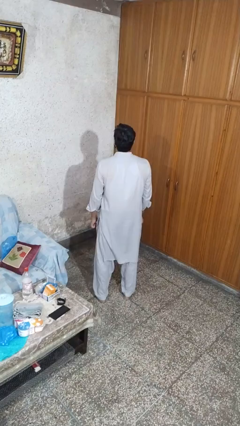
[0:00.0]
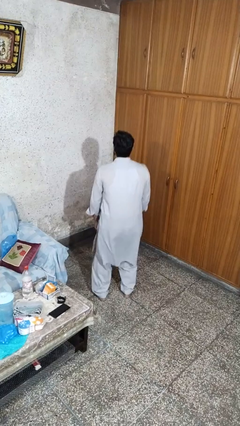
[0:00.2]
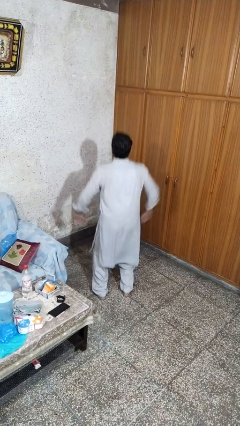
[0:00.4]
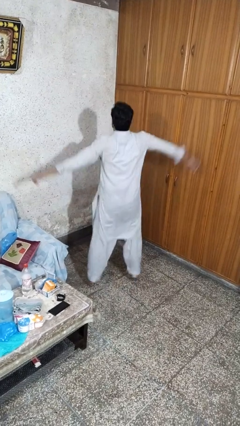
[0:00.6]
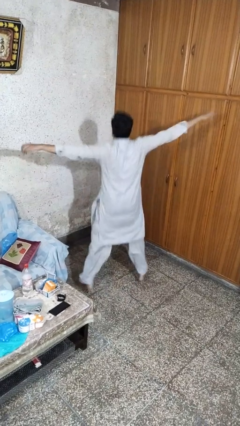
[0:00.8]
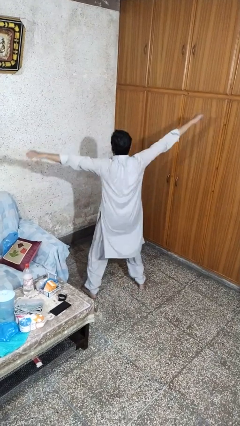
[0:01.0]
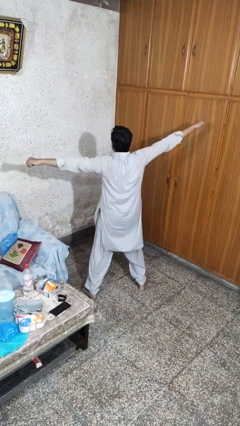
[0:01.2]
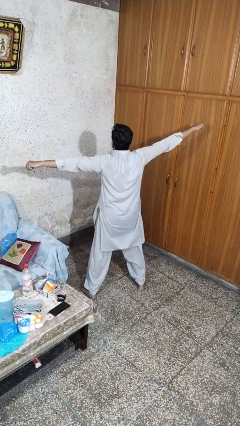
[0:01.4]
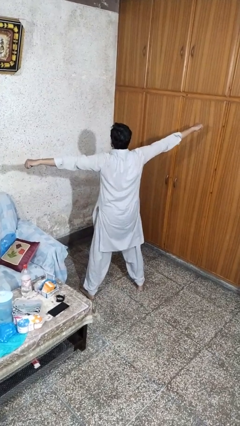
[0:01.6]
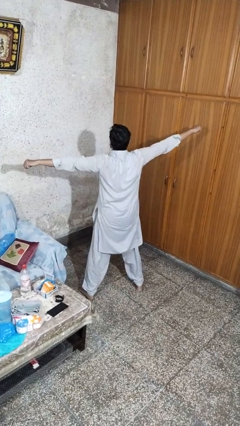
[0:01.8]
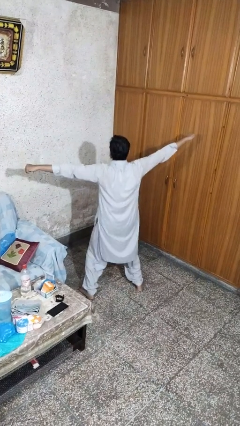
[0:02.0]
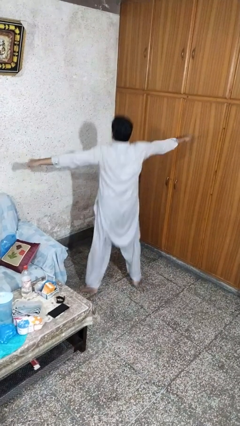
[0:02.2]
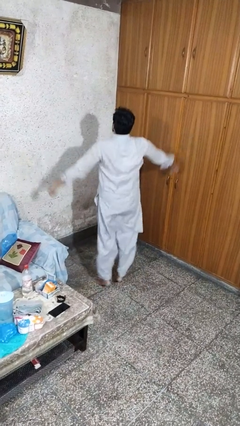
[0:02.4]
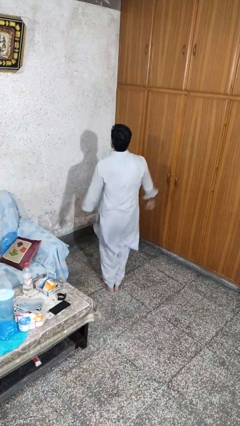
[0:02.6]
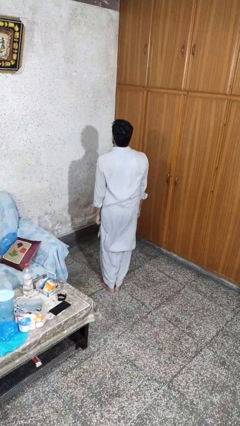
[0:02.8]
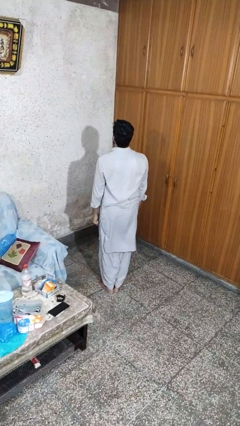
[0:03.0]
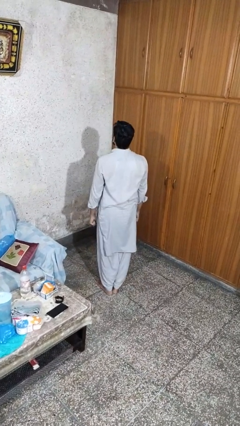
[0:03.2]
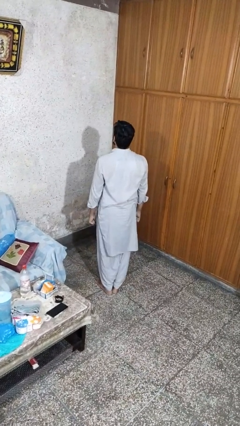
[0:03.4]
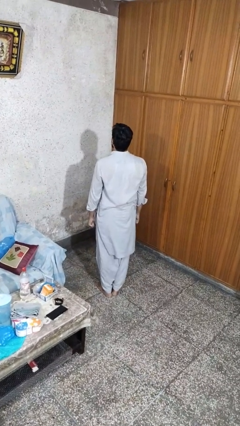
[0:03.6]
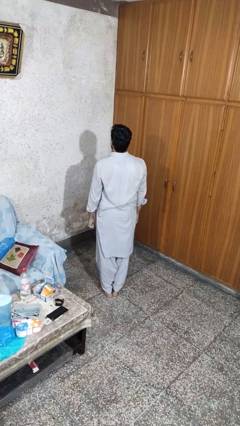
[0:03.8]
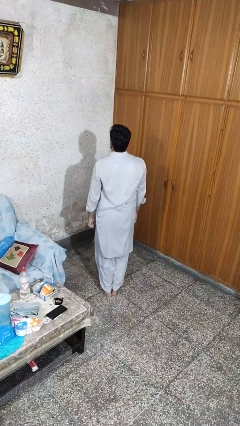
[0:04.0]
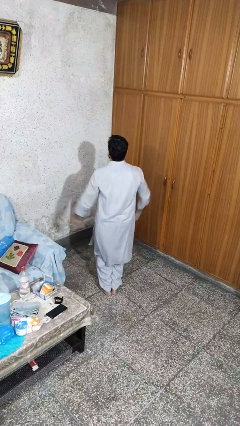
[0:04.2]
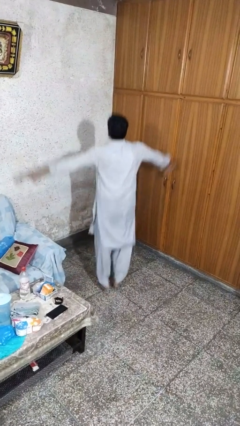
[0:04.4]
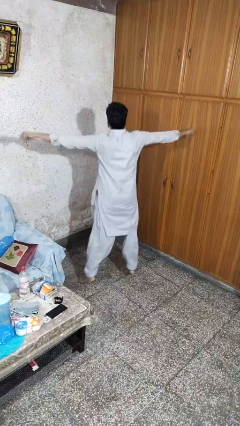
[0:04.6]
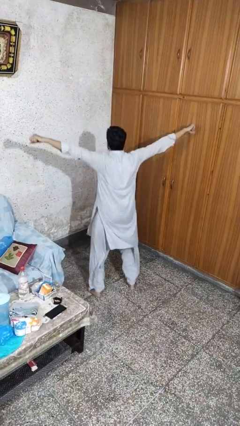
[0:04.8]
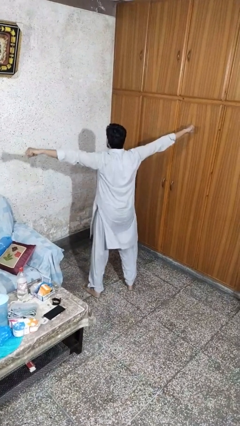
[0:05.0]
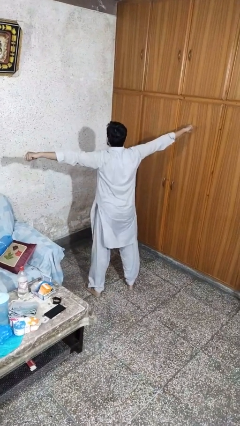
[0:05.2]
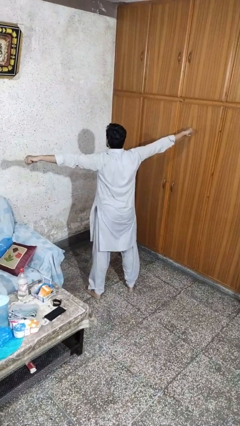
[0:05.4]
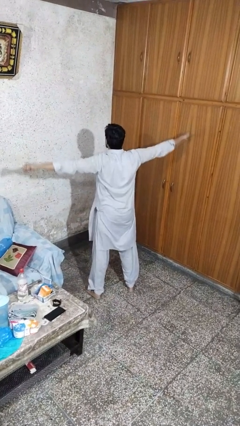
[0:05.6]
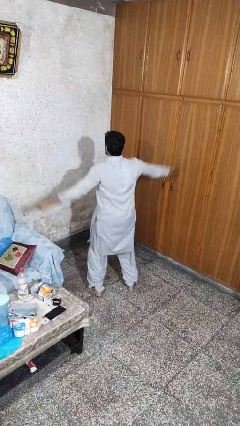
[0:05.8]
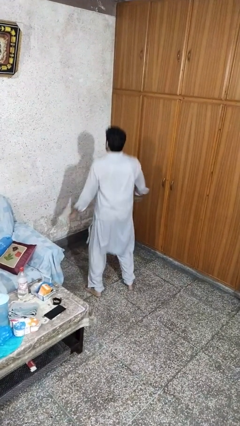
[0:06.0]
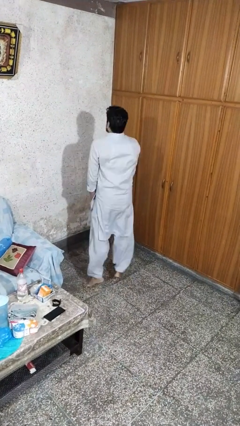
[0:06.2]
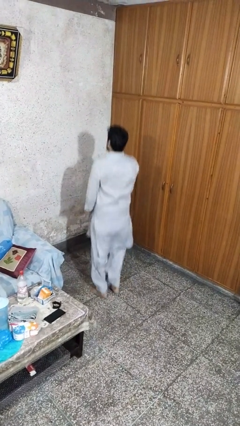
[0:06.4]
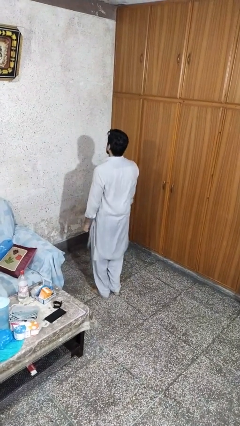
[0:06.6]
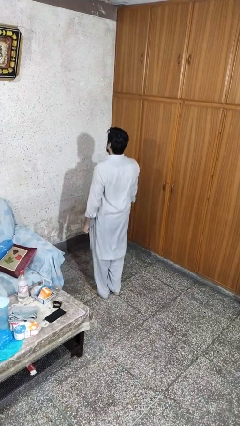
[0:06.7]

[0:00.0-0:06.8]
person exercises with jumping jacks

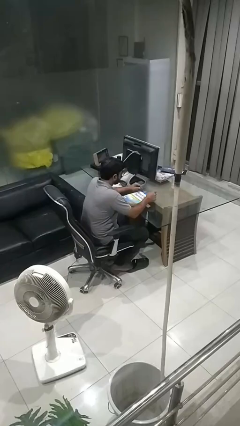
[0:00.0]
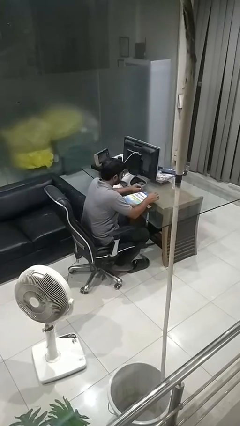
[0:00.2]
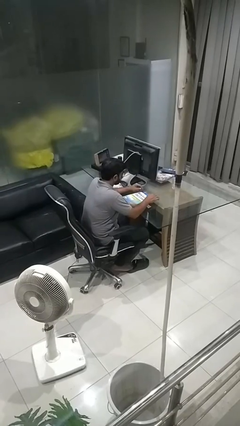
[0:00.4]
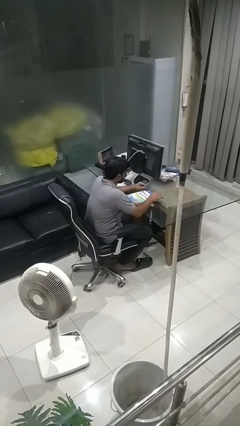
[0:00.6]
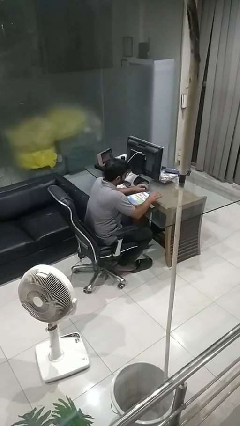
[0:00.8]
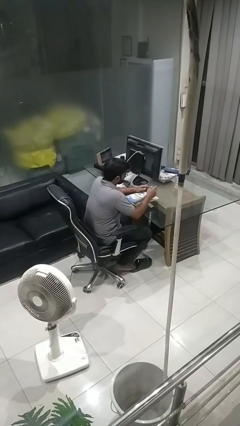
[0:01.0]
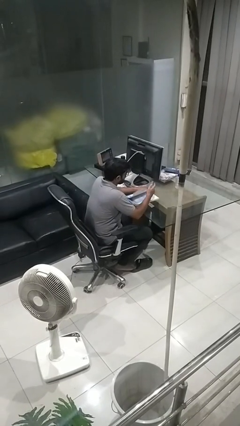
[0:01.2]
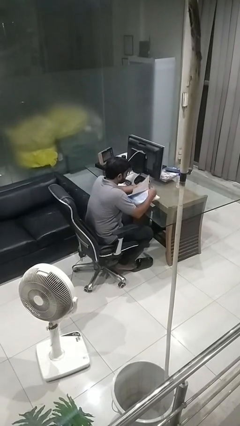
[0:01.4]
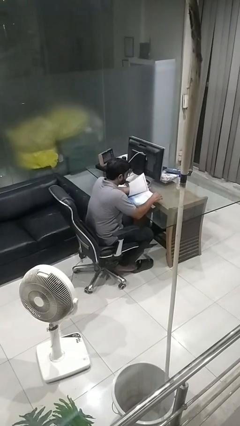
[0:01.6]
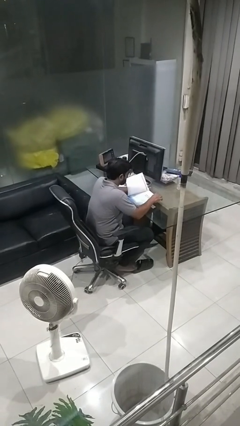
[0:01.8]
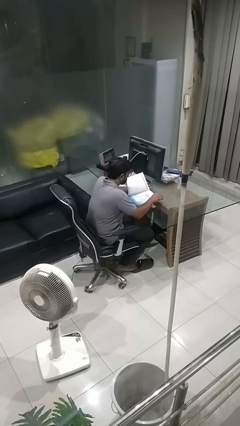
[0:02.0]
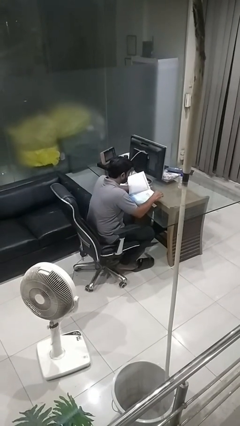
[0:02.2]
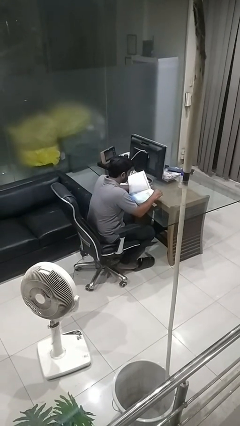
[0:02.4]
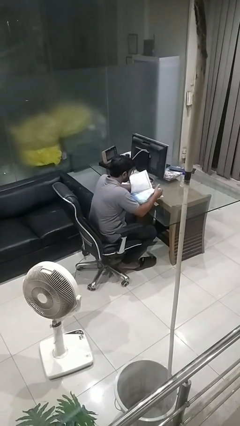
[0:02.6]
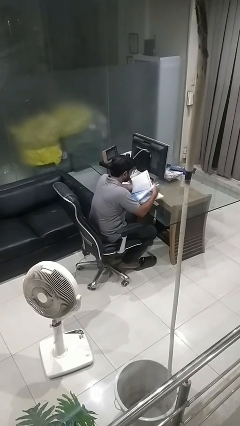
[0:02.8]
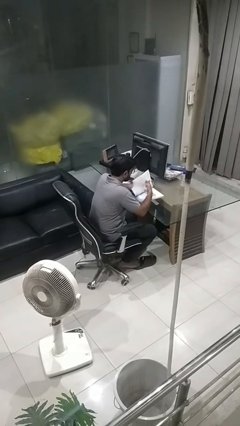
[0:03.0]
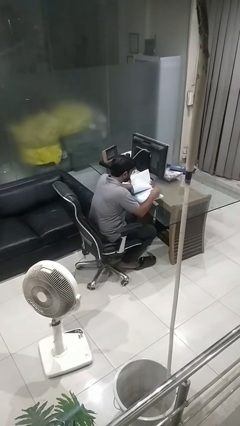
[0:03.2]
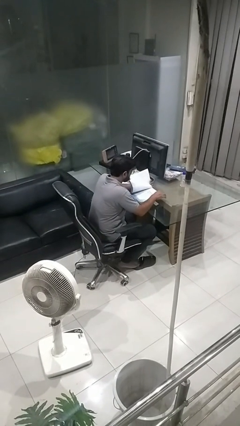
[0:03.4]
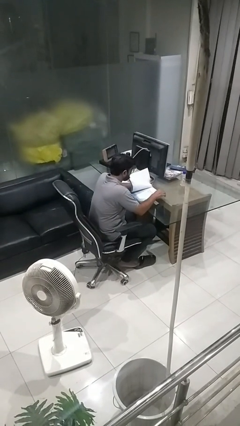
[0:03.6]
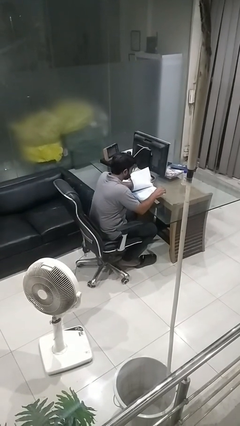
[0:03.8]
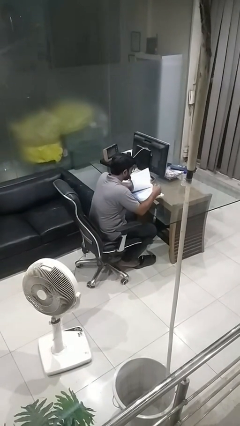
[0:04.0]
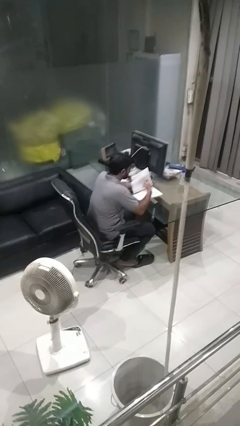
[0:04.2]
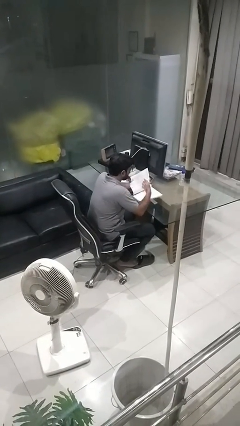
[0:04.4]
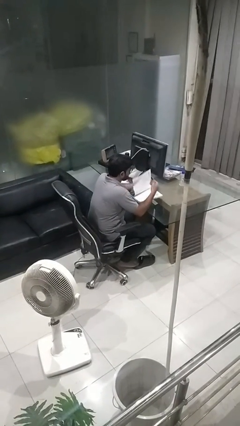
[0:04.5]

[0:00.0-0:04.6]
person reads book

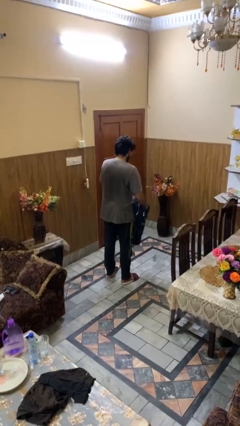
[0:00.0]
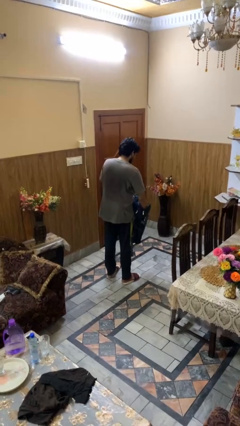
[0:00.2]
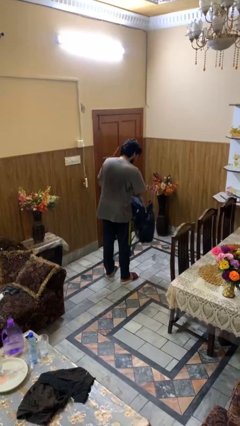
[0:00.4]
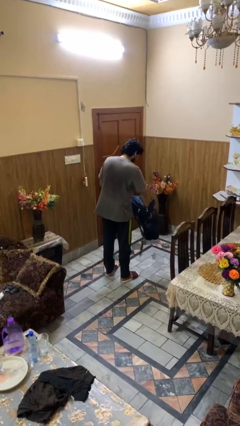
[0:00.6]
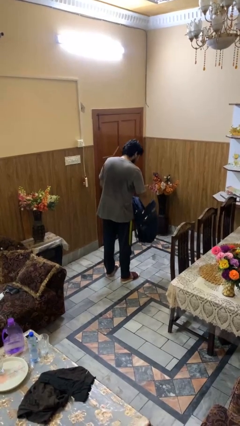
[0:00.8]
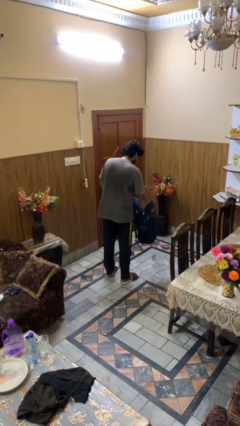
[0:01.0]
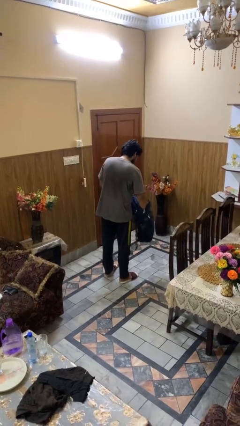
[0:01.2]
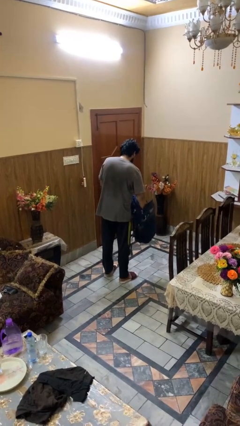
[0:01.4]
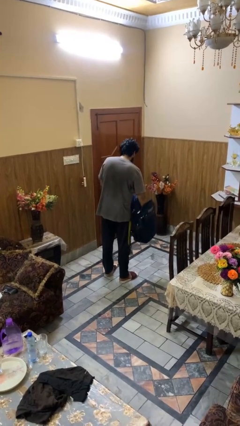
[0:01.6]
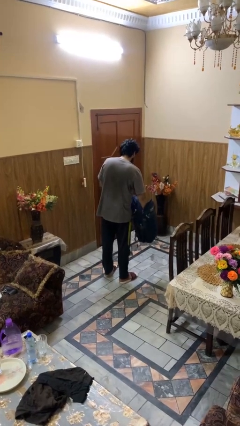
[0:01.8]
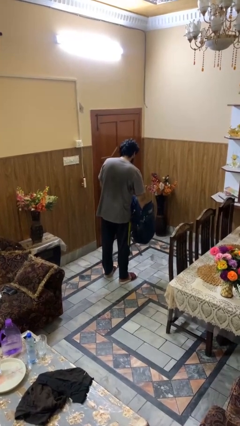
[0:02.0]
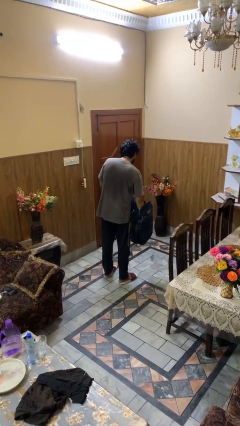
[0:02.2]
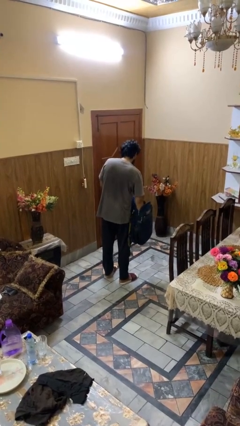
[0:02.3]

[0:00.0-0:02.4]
person searches in backpack

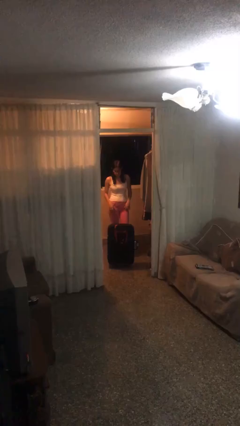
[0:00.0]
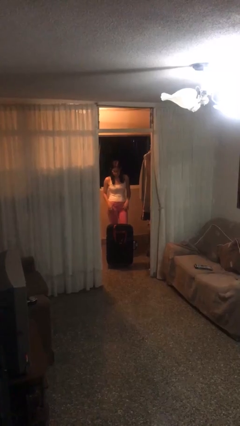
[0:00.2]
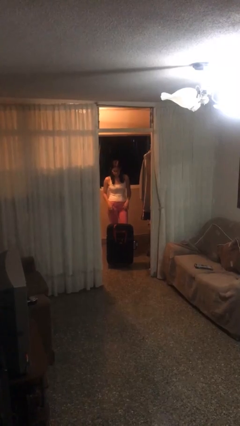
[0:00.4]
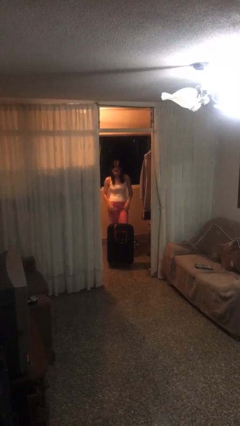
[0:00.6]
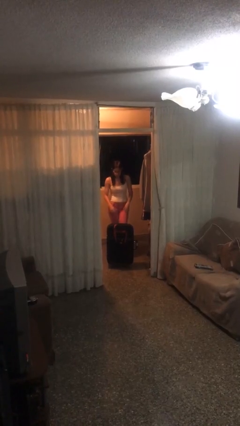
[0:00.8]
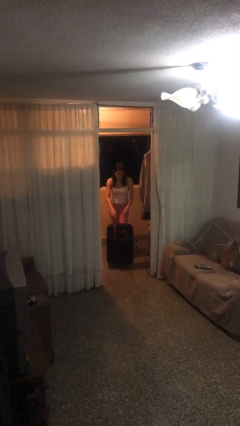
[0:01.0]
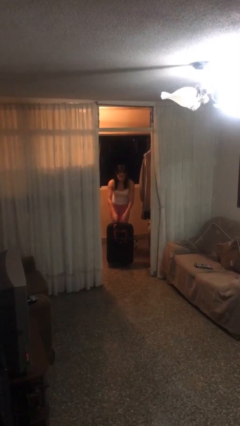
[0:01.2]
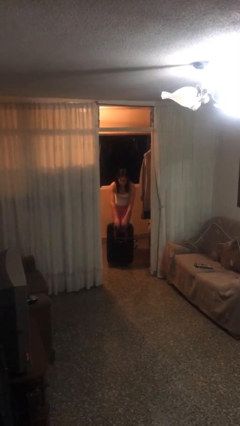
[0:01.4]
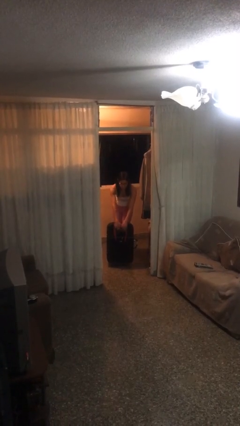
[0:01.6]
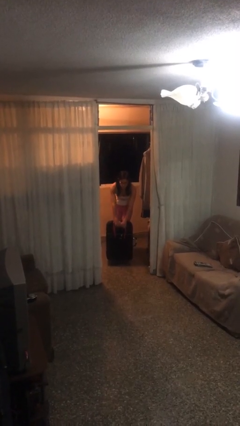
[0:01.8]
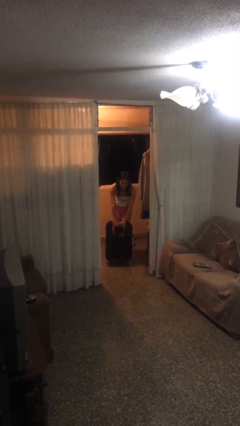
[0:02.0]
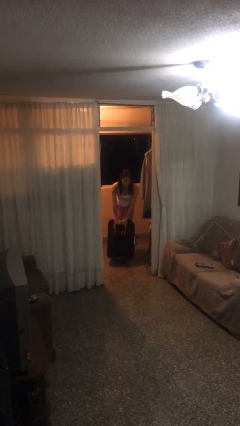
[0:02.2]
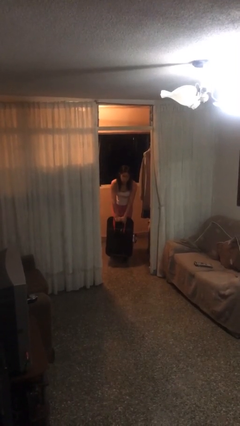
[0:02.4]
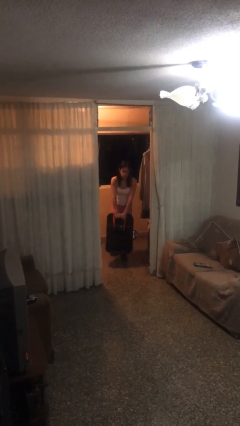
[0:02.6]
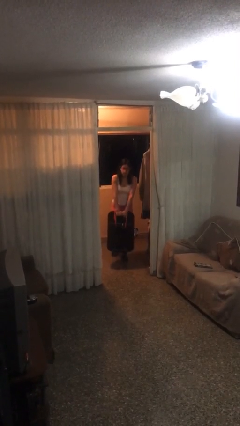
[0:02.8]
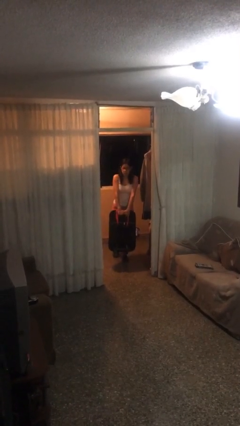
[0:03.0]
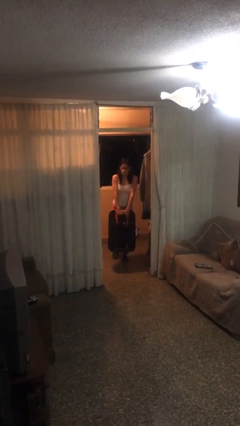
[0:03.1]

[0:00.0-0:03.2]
person picks up object from floor

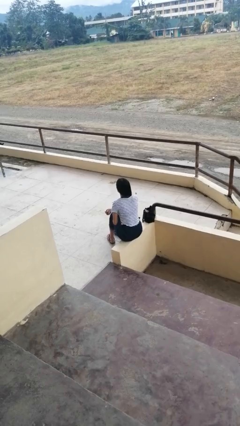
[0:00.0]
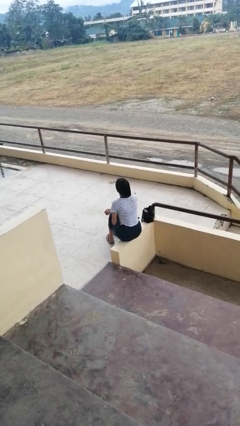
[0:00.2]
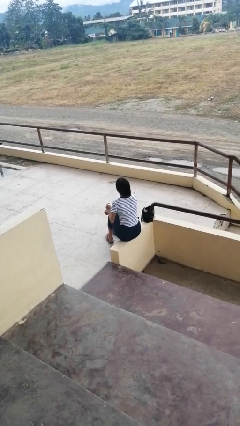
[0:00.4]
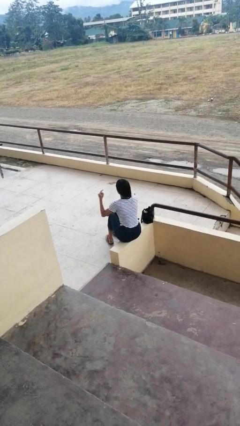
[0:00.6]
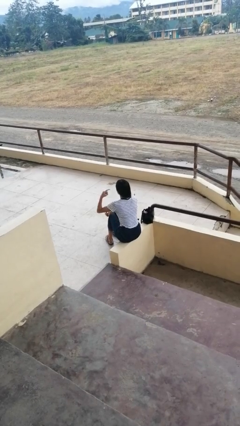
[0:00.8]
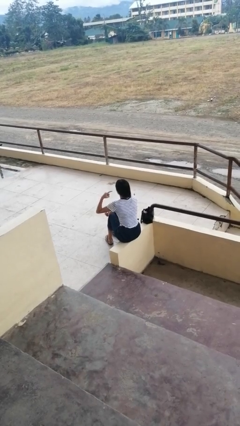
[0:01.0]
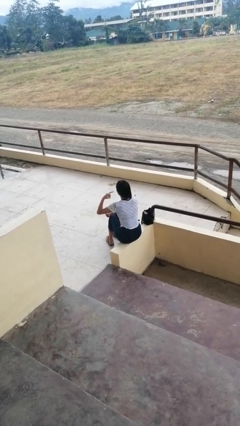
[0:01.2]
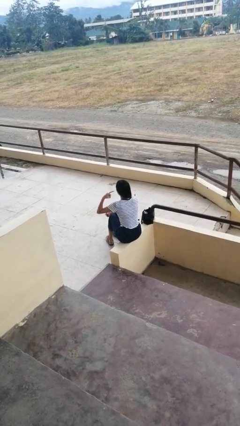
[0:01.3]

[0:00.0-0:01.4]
person gestures listen closely
